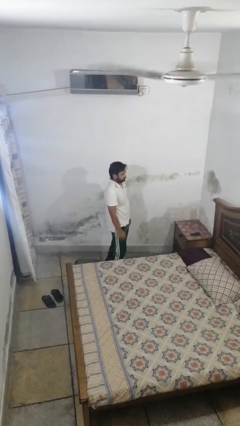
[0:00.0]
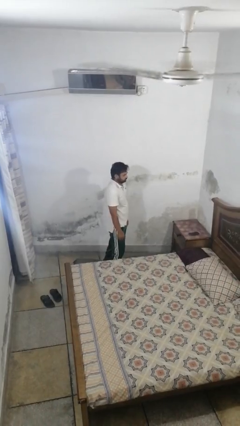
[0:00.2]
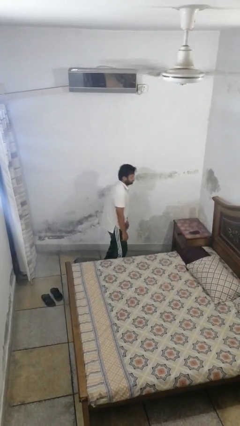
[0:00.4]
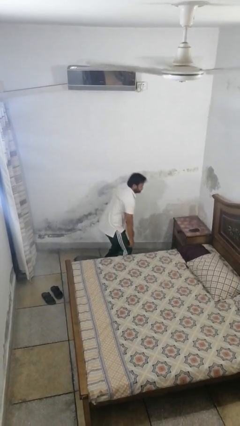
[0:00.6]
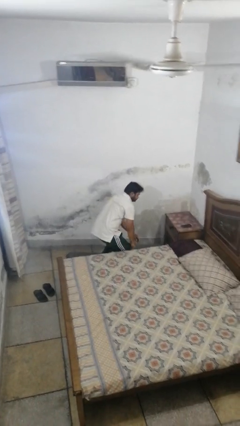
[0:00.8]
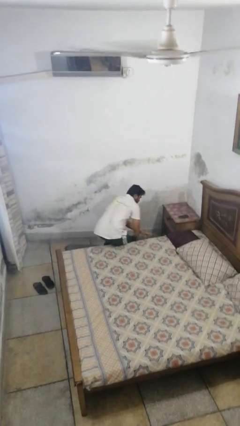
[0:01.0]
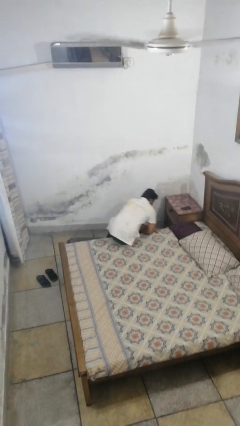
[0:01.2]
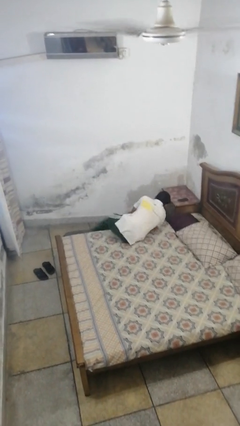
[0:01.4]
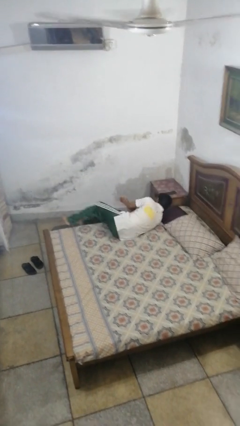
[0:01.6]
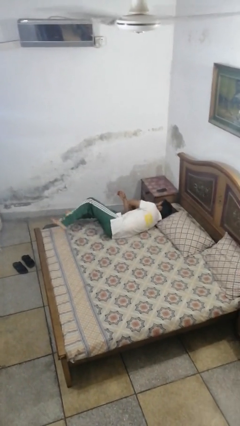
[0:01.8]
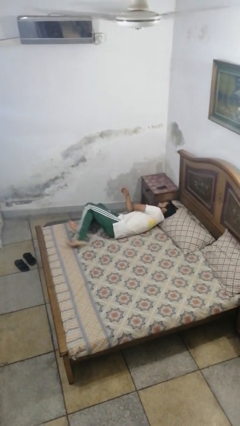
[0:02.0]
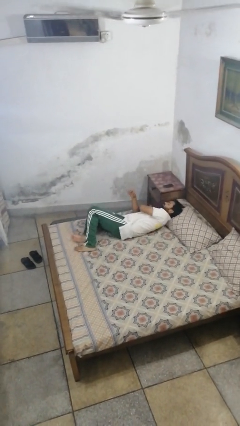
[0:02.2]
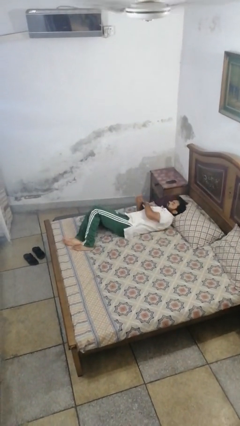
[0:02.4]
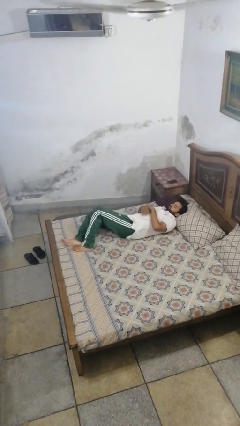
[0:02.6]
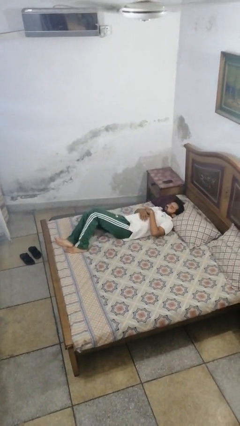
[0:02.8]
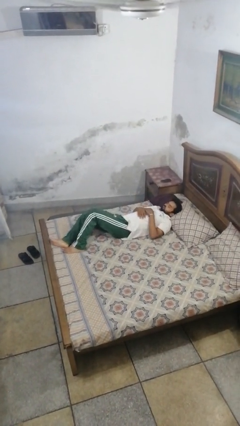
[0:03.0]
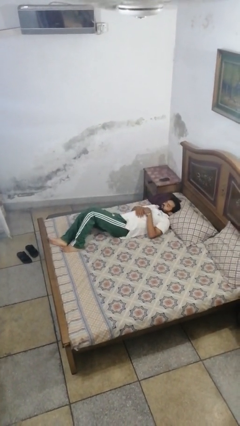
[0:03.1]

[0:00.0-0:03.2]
person lies down on bed

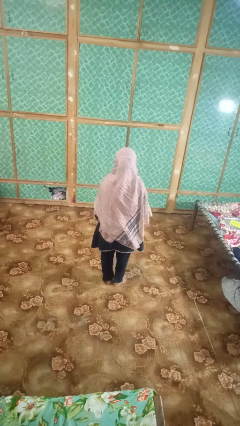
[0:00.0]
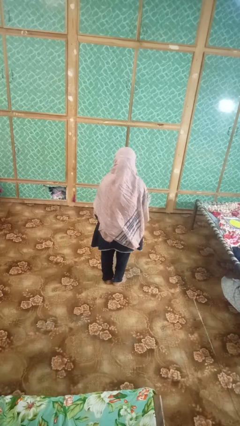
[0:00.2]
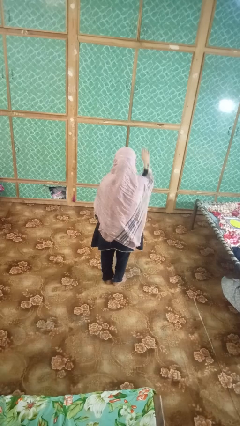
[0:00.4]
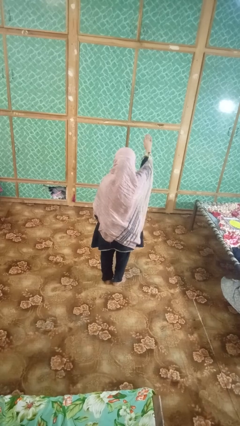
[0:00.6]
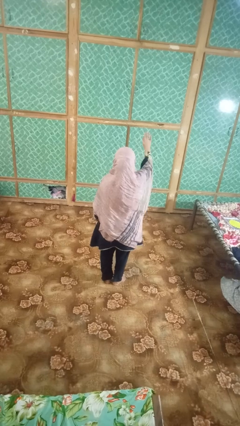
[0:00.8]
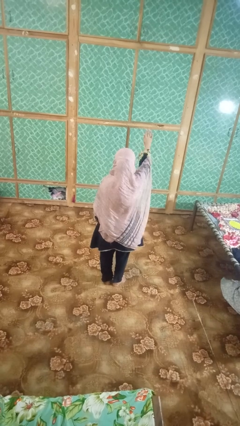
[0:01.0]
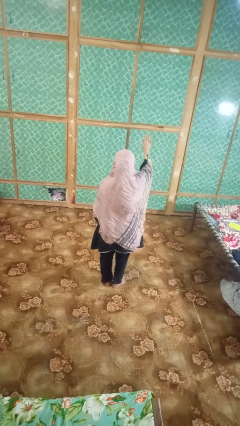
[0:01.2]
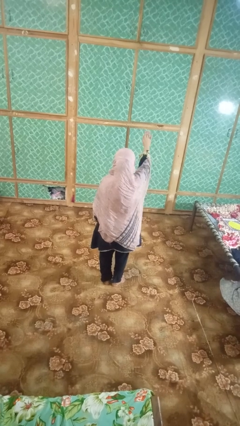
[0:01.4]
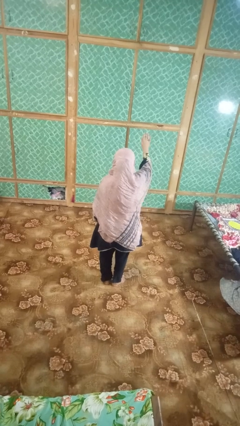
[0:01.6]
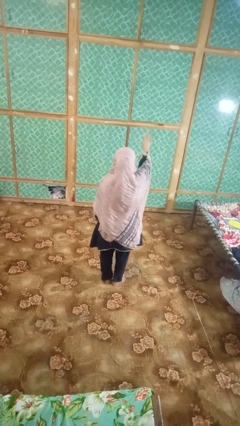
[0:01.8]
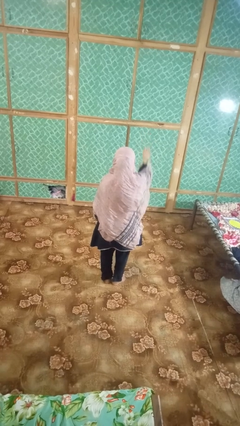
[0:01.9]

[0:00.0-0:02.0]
person gestures stop

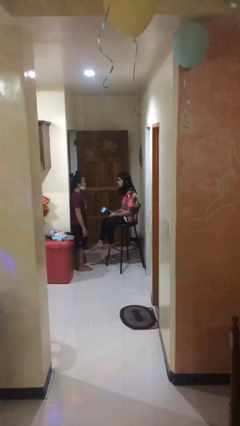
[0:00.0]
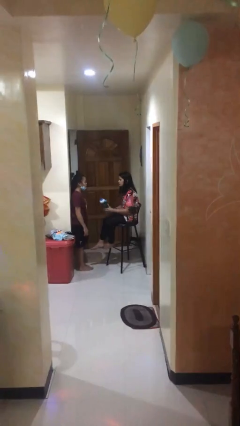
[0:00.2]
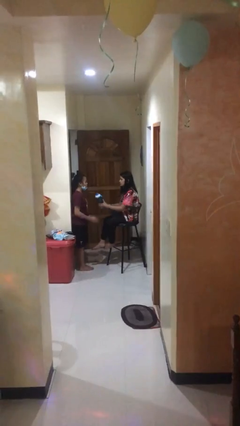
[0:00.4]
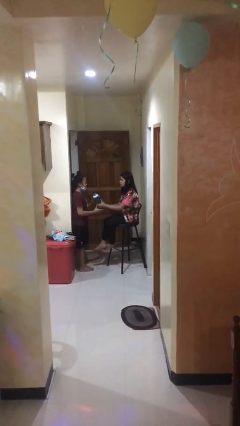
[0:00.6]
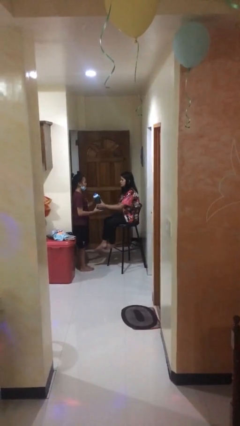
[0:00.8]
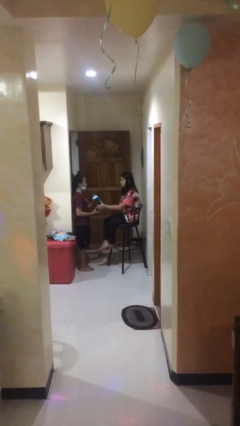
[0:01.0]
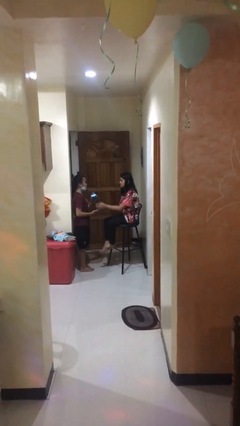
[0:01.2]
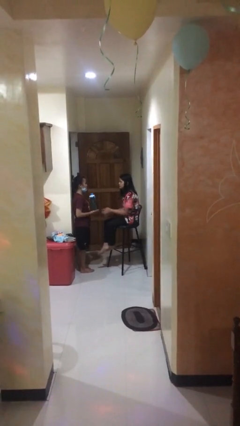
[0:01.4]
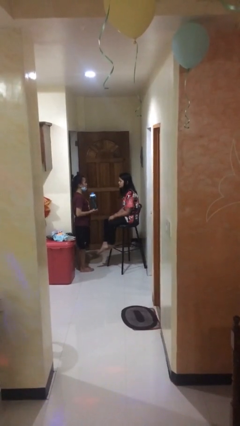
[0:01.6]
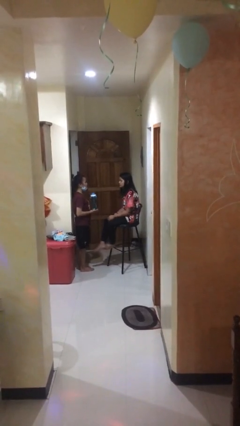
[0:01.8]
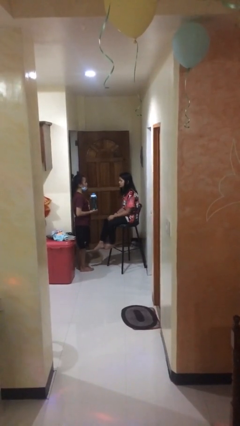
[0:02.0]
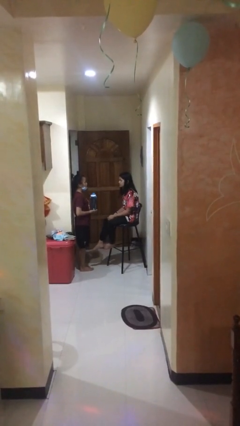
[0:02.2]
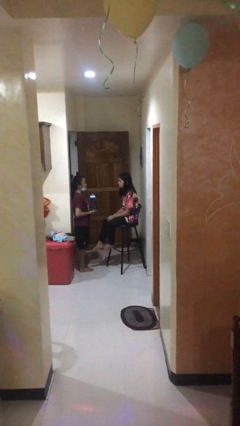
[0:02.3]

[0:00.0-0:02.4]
person transfers object to person

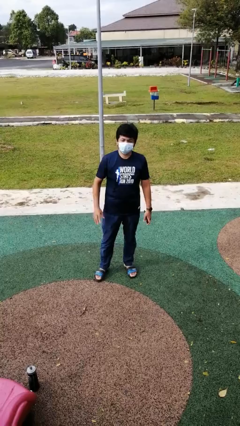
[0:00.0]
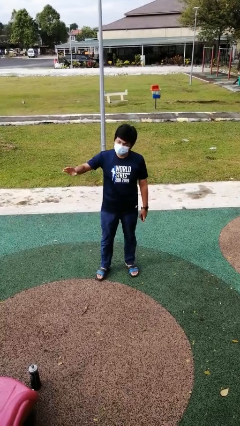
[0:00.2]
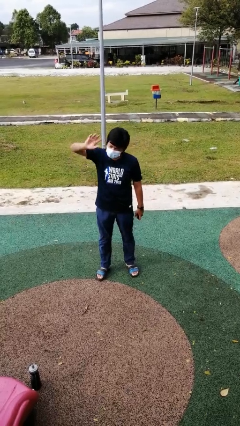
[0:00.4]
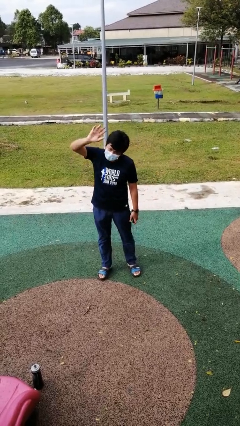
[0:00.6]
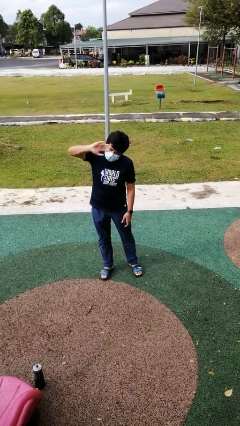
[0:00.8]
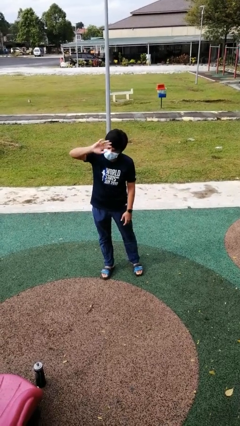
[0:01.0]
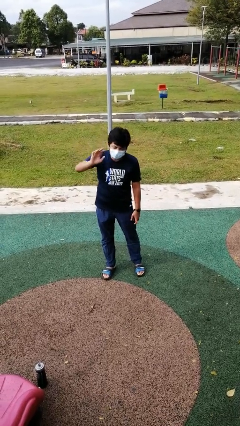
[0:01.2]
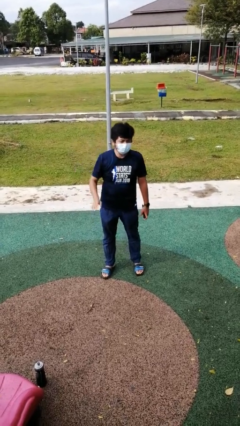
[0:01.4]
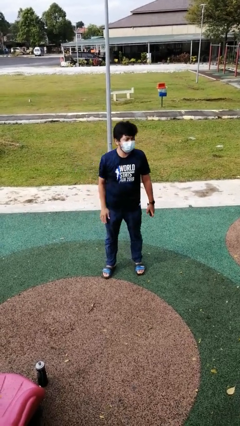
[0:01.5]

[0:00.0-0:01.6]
person waves at person

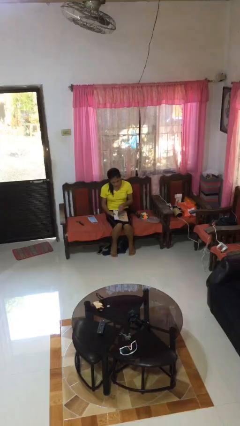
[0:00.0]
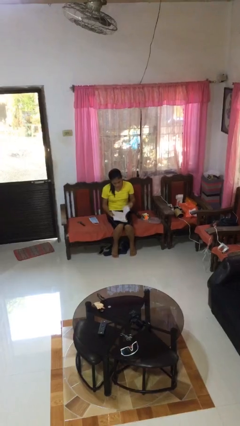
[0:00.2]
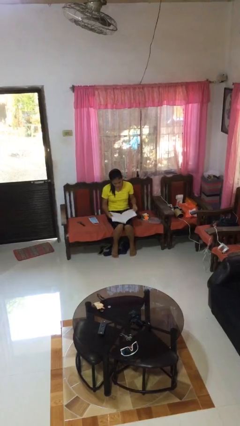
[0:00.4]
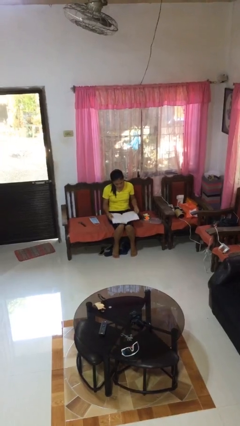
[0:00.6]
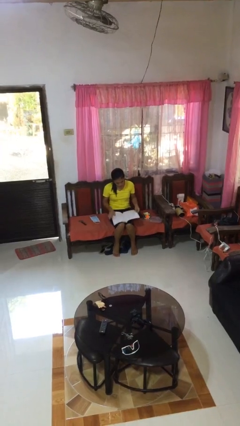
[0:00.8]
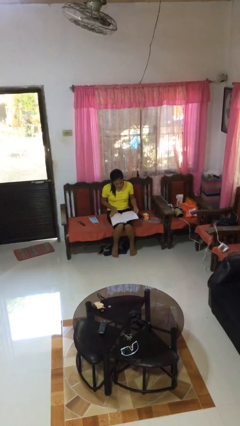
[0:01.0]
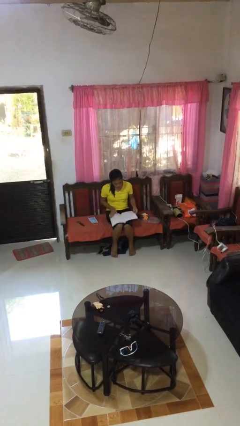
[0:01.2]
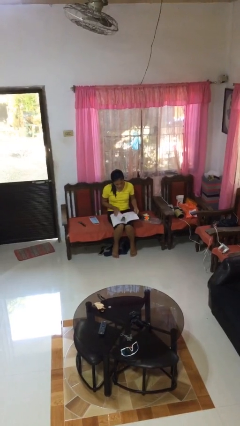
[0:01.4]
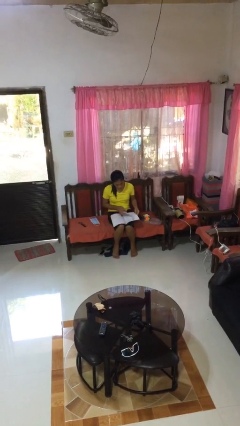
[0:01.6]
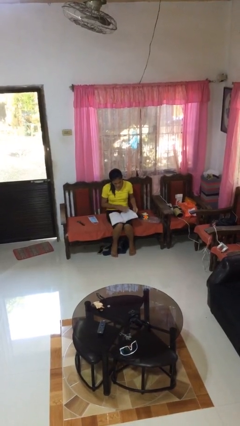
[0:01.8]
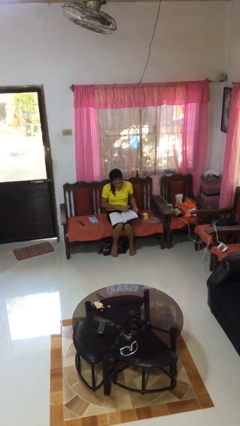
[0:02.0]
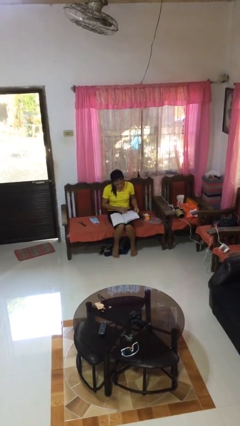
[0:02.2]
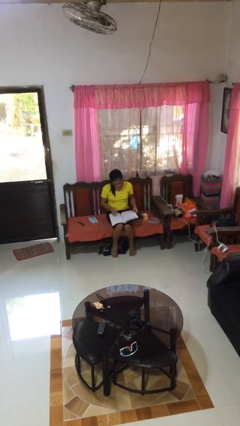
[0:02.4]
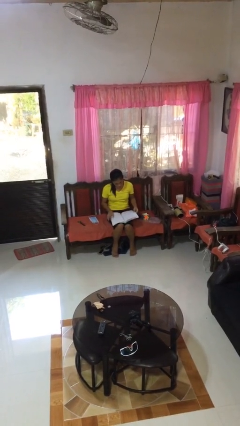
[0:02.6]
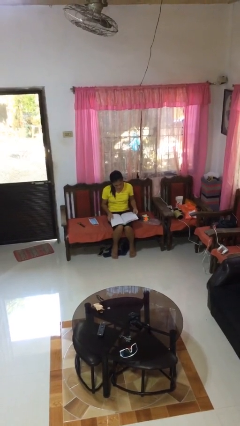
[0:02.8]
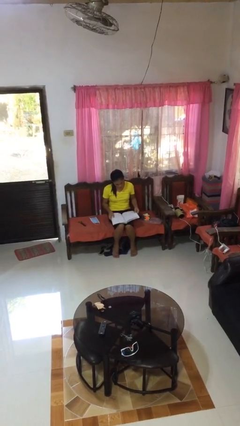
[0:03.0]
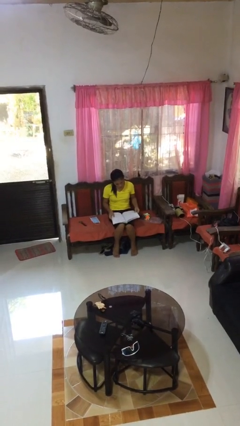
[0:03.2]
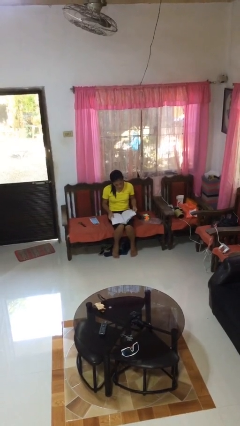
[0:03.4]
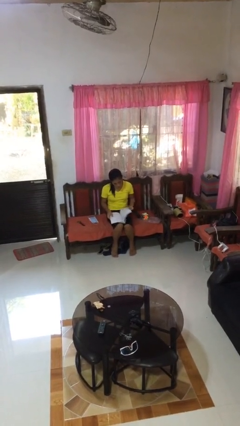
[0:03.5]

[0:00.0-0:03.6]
person reads book

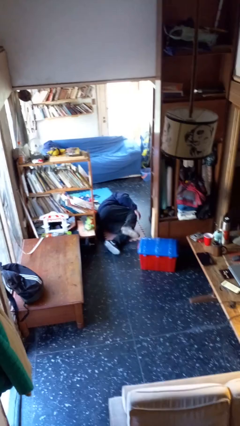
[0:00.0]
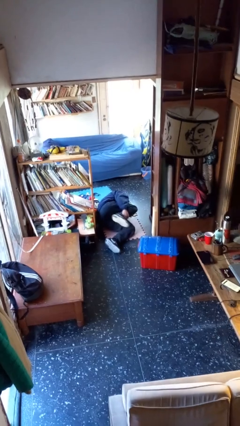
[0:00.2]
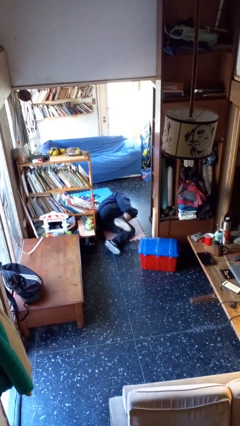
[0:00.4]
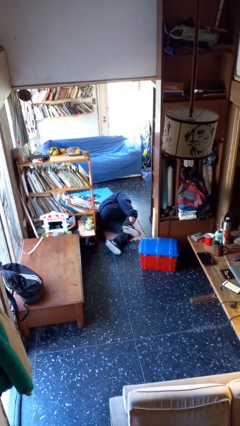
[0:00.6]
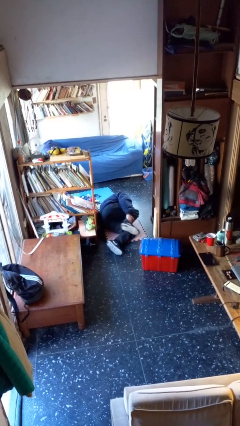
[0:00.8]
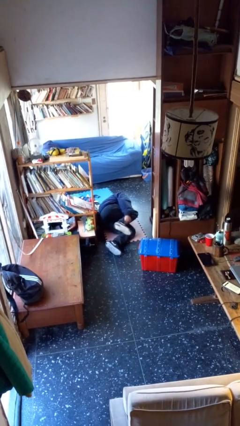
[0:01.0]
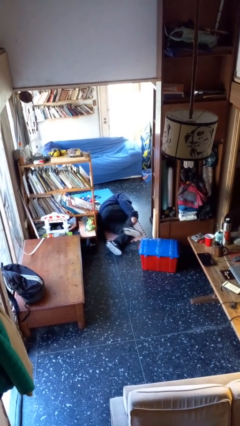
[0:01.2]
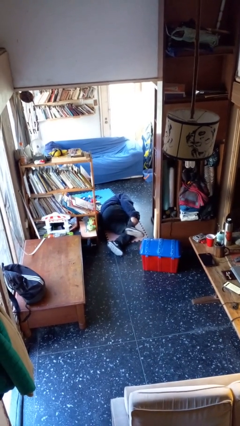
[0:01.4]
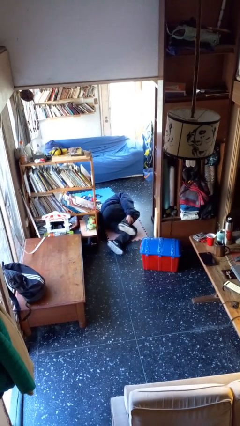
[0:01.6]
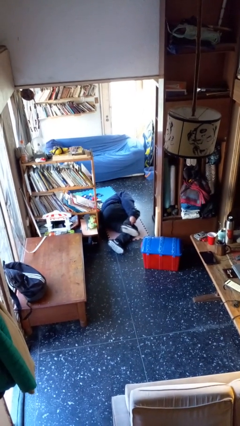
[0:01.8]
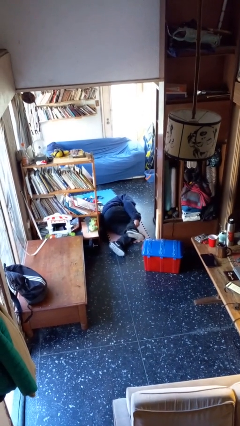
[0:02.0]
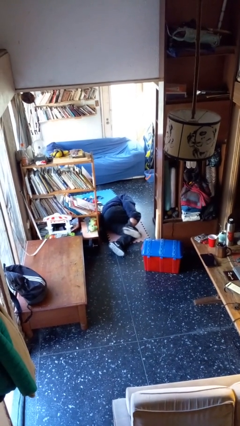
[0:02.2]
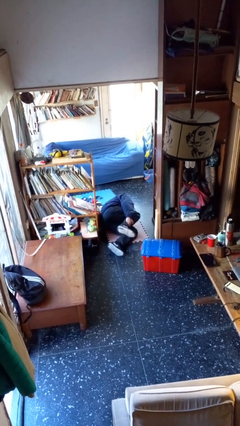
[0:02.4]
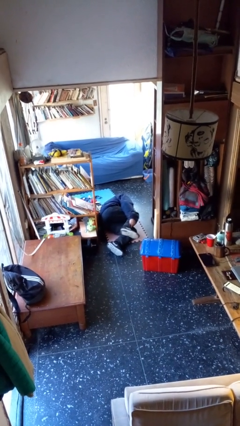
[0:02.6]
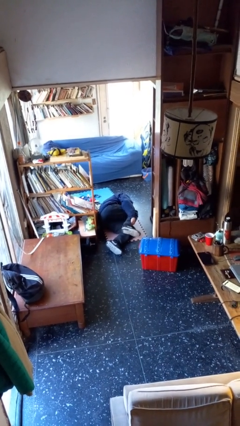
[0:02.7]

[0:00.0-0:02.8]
person lies down on floor

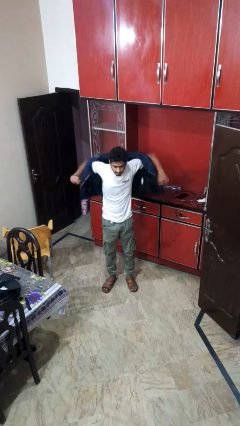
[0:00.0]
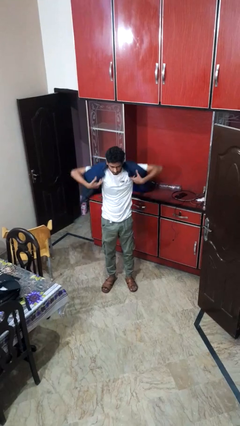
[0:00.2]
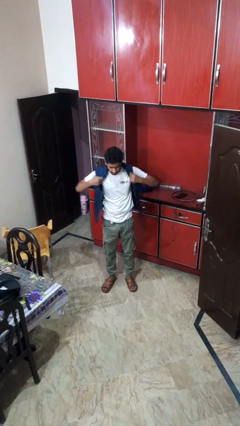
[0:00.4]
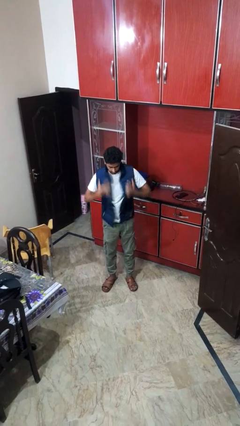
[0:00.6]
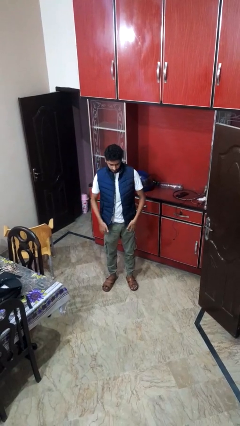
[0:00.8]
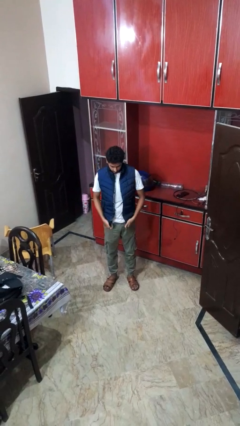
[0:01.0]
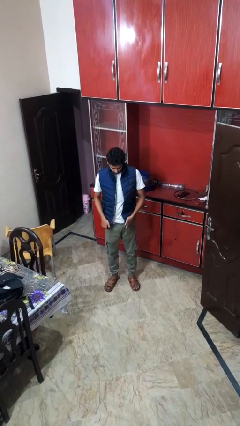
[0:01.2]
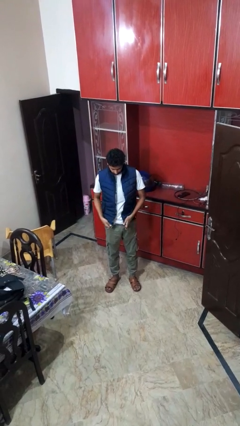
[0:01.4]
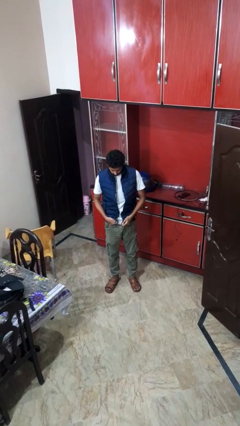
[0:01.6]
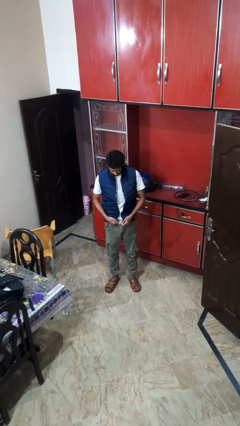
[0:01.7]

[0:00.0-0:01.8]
person puts on jacket
